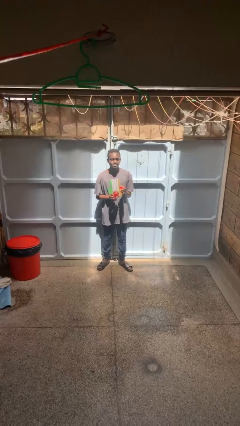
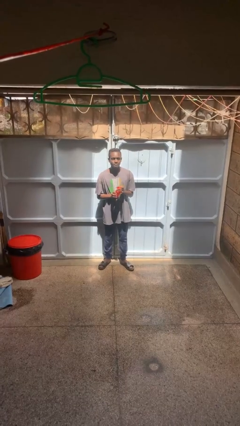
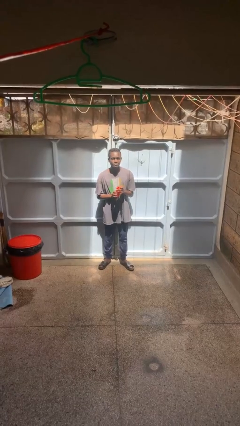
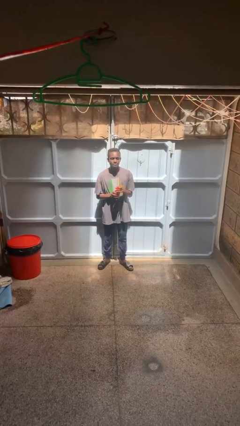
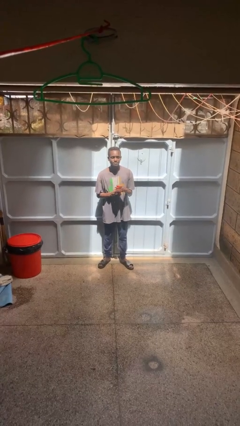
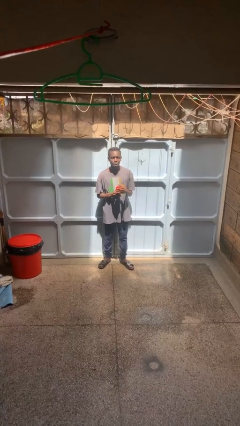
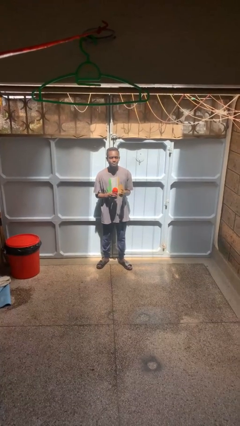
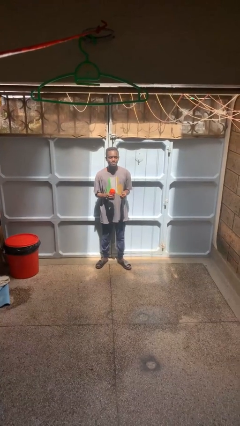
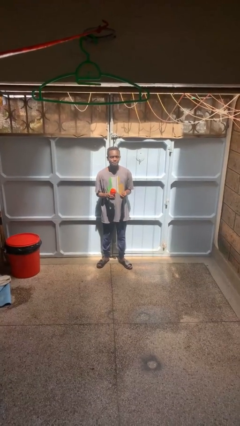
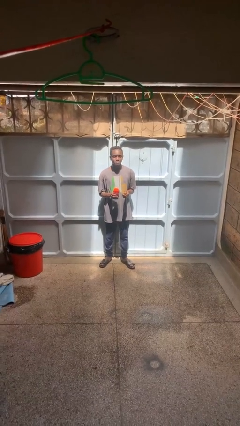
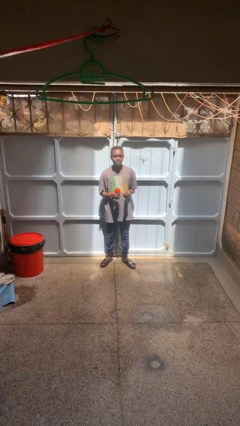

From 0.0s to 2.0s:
person closes jar

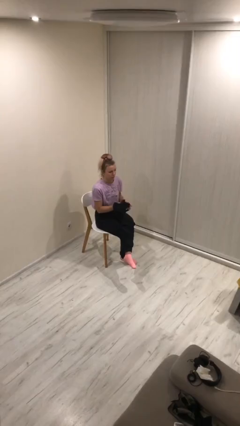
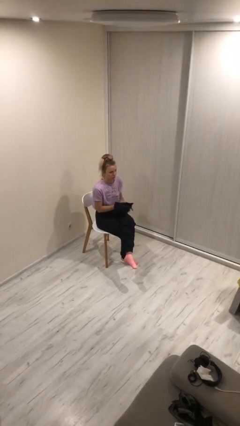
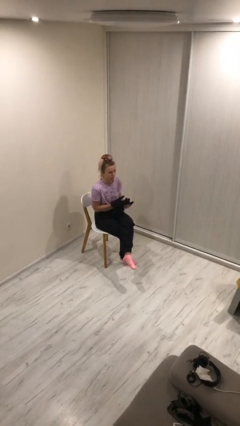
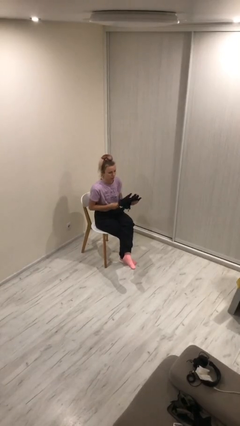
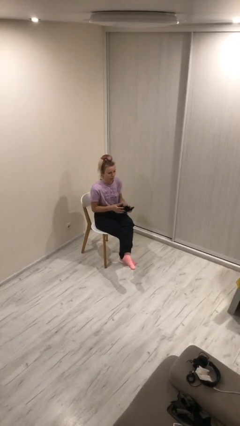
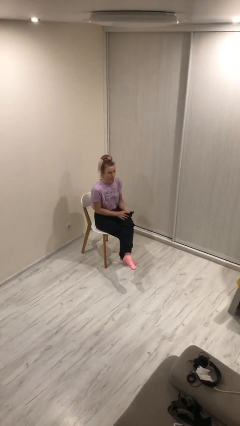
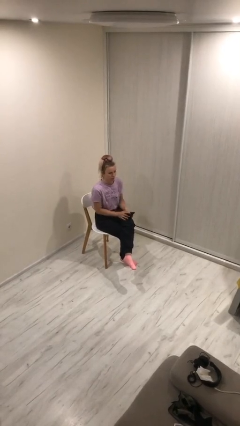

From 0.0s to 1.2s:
person takes off gloves

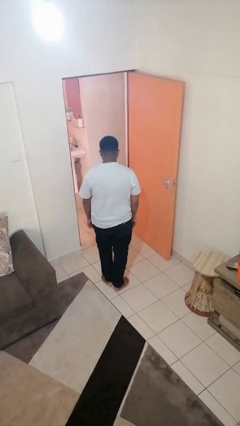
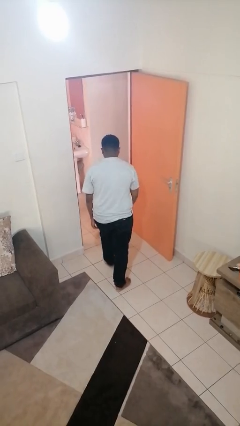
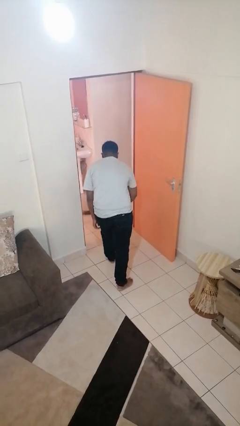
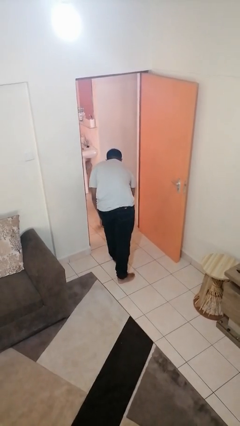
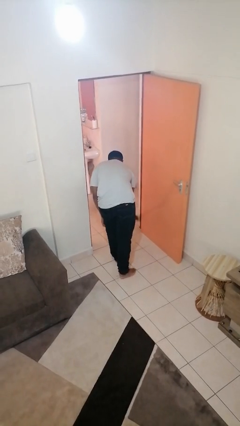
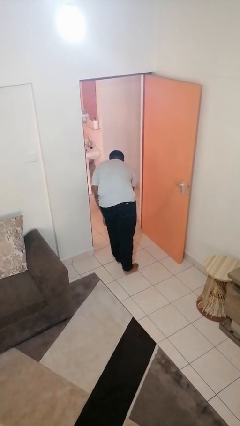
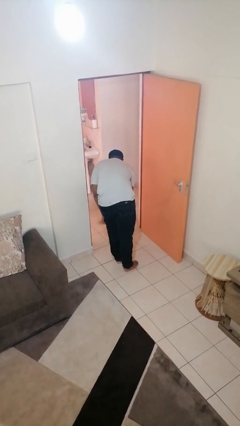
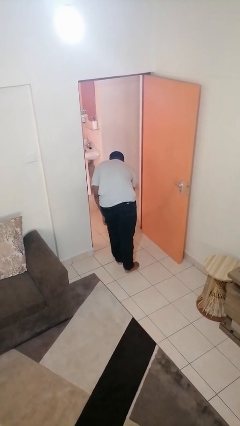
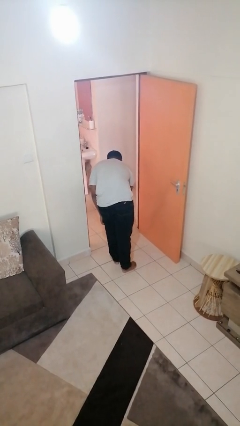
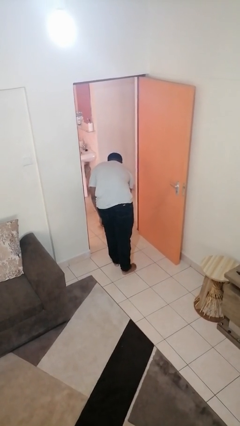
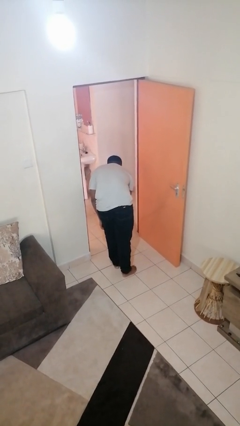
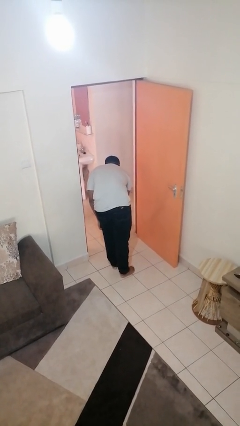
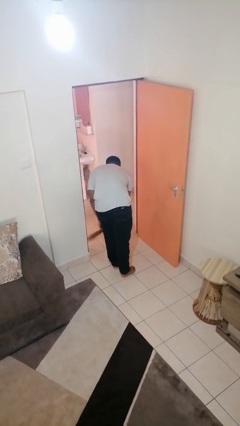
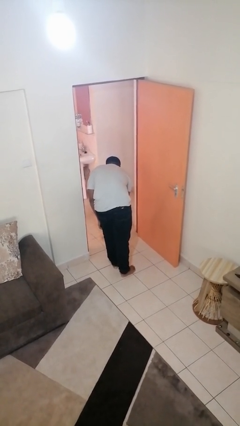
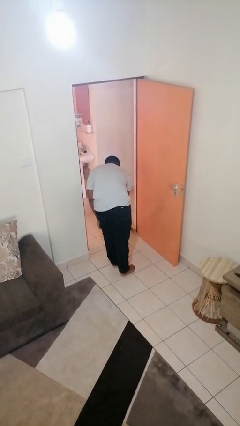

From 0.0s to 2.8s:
person sweeps floor

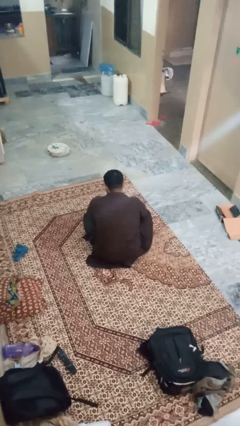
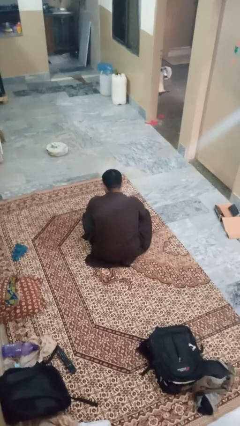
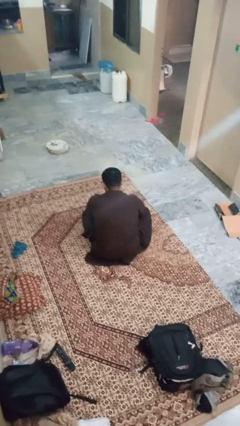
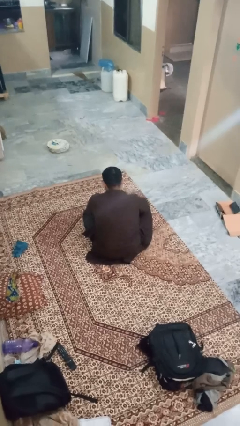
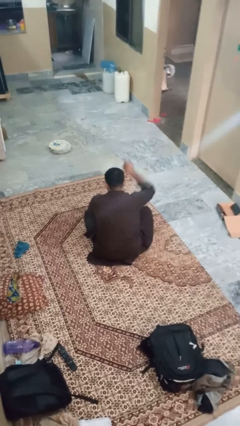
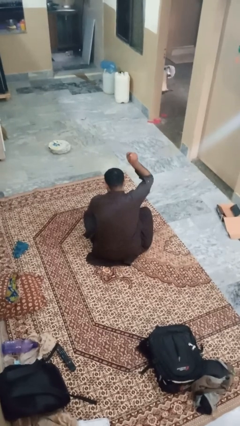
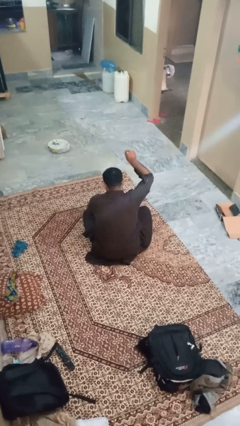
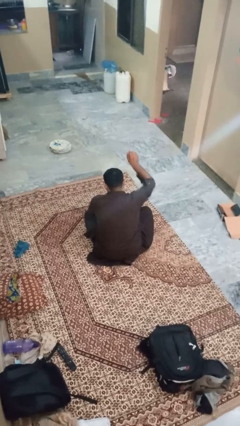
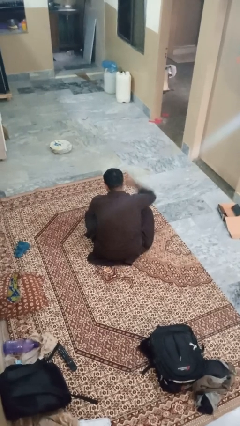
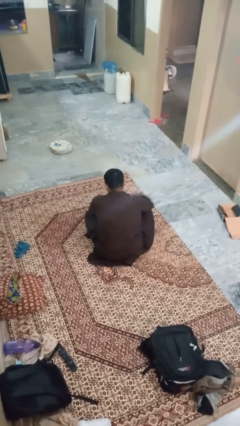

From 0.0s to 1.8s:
person gestures number one

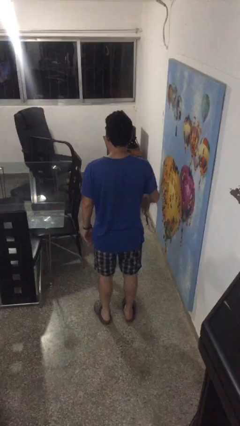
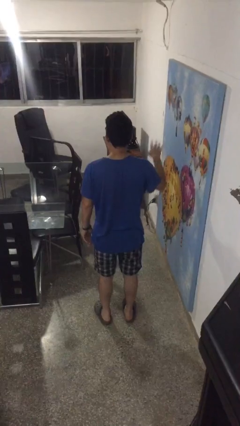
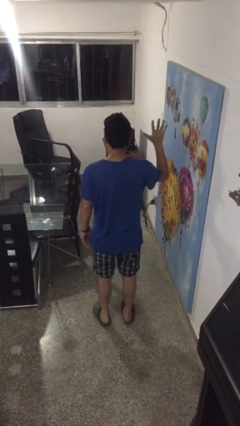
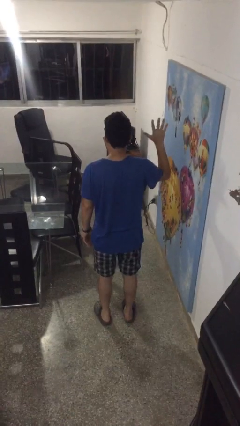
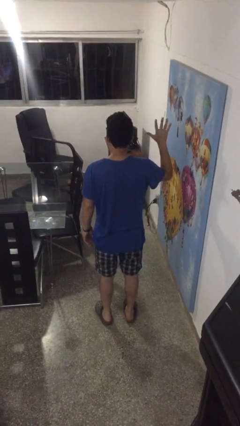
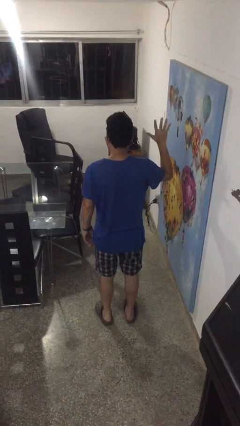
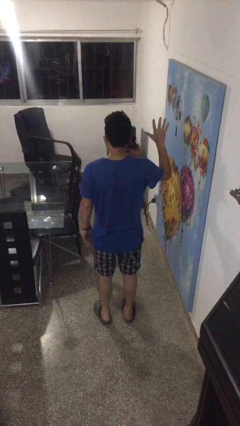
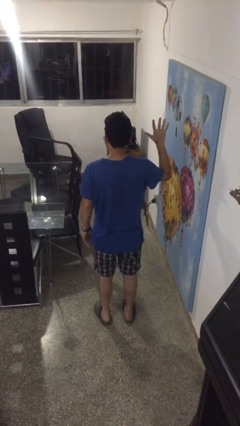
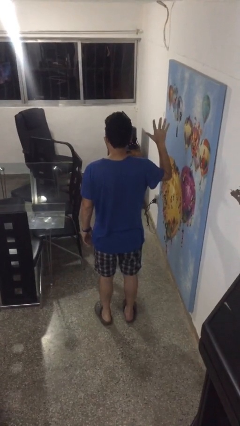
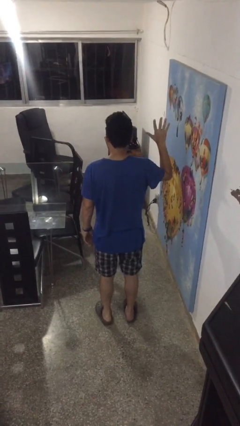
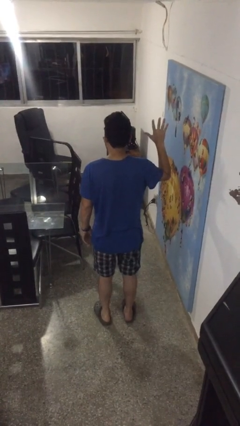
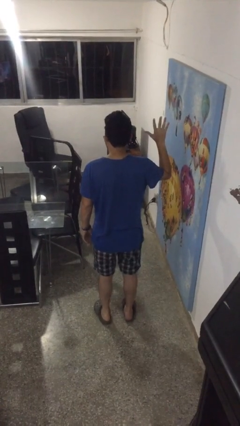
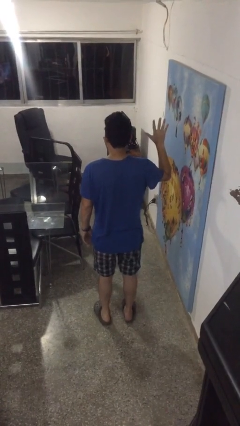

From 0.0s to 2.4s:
person gestures number five

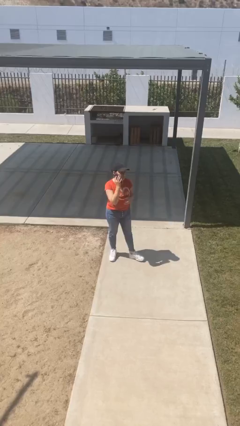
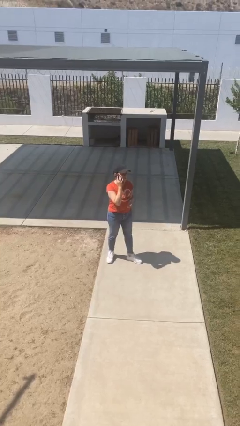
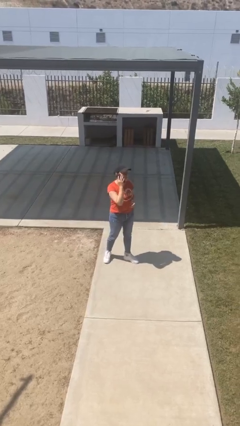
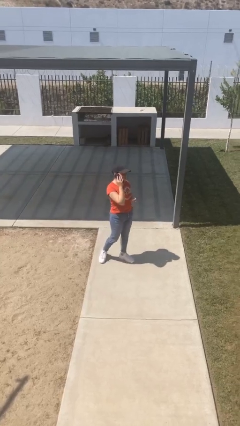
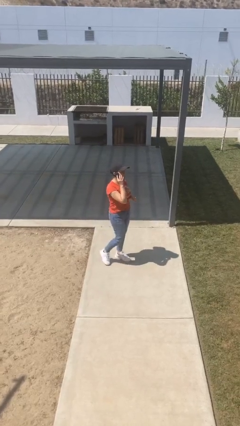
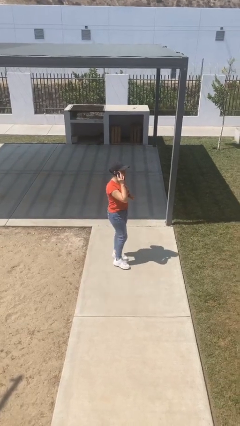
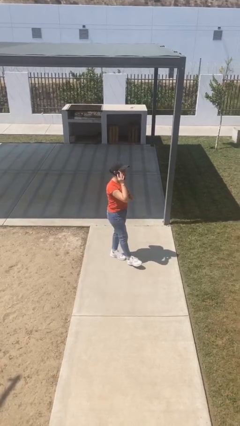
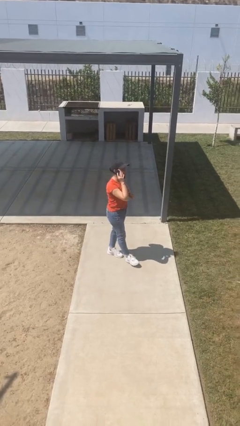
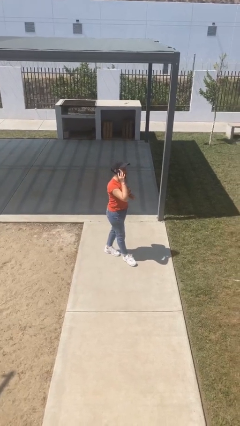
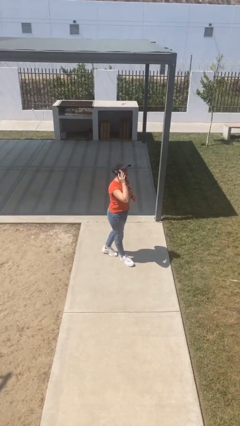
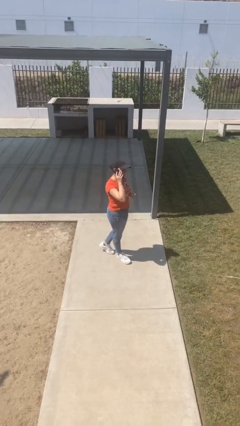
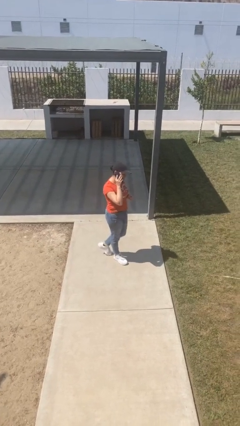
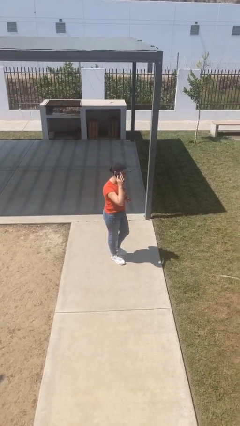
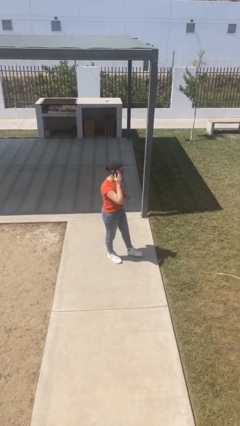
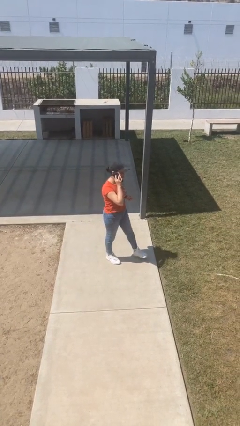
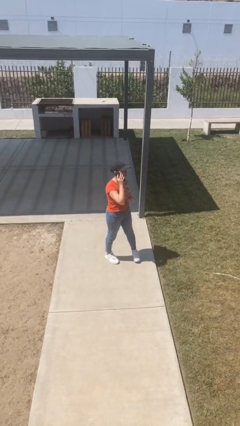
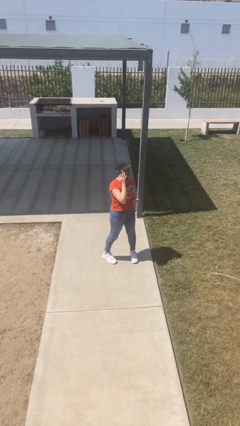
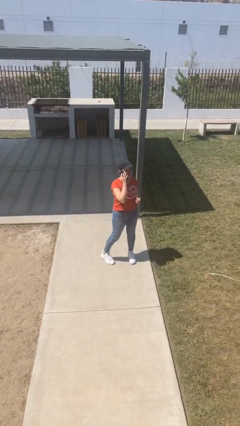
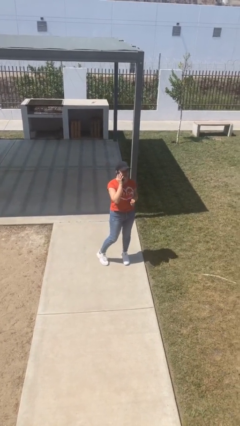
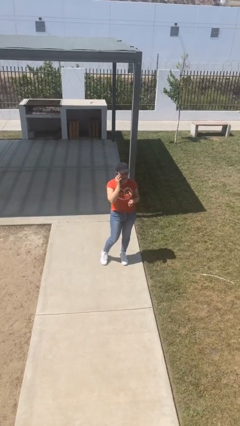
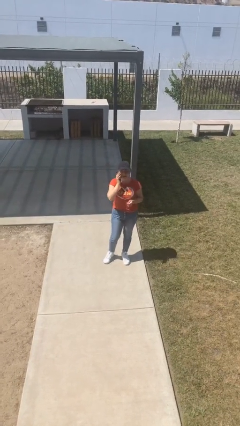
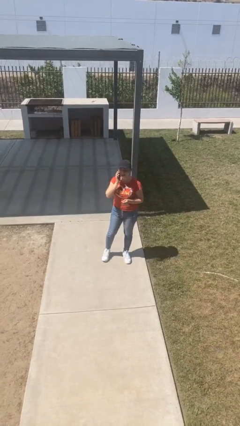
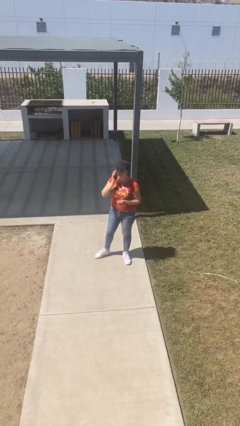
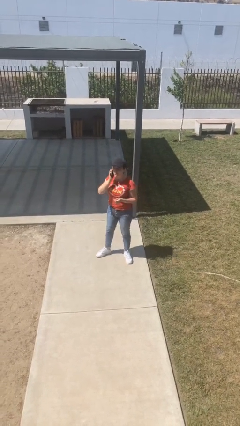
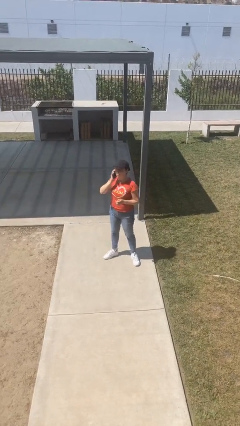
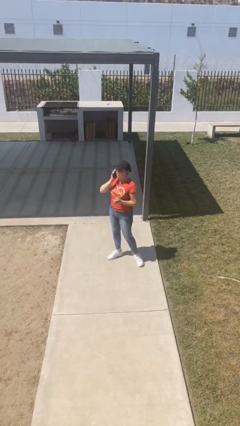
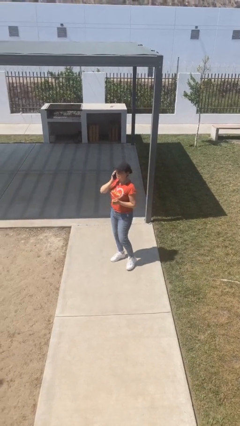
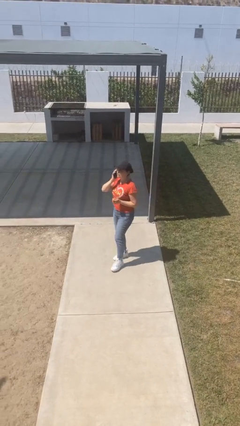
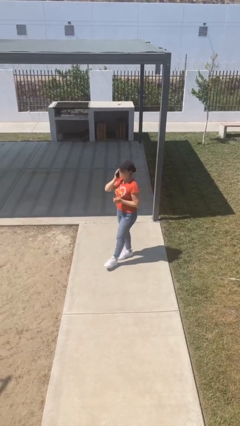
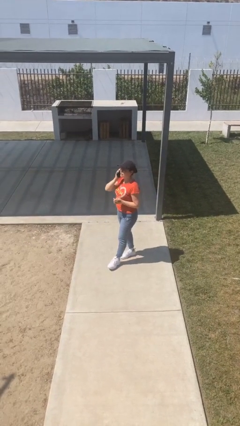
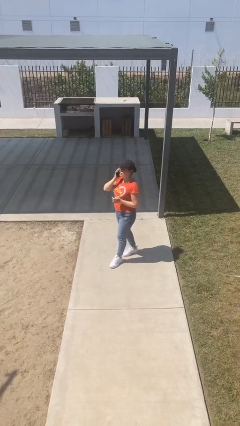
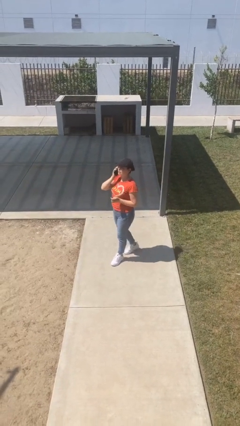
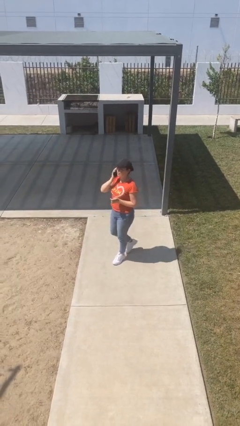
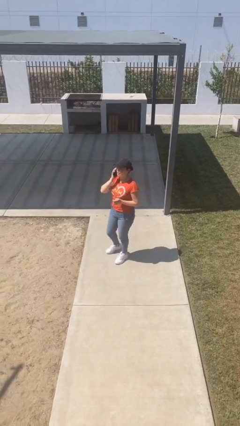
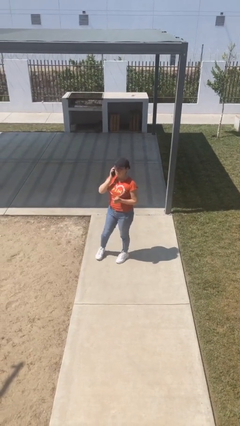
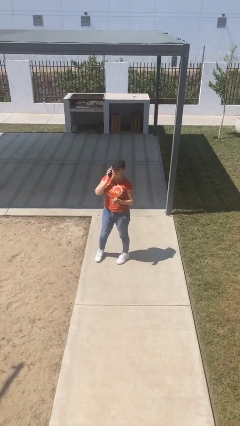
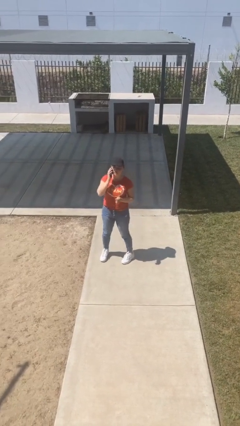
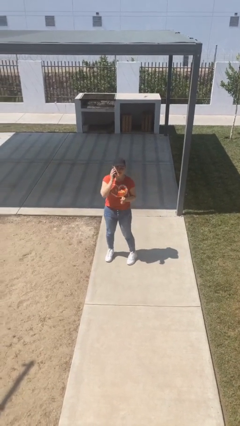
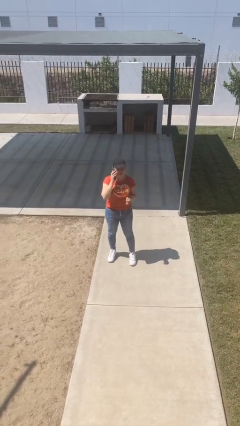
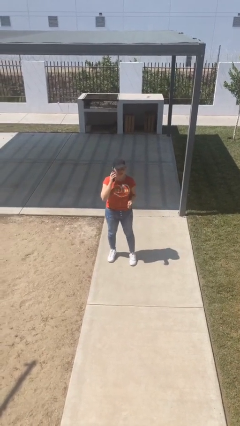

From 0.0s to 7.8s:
person talks on phone
